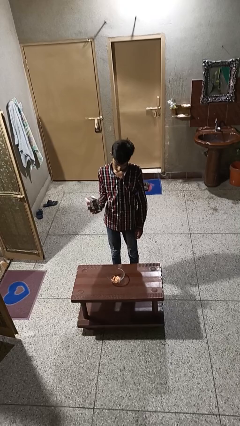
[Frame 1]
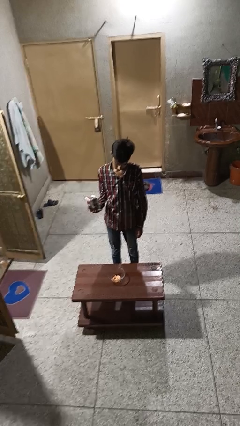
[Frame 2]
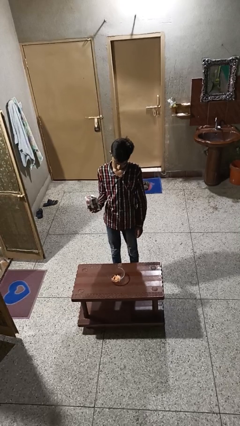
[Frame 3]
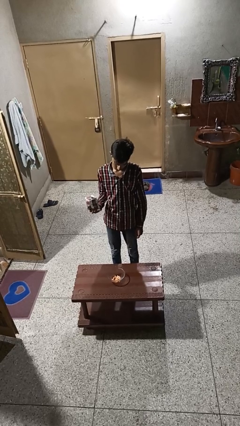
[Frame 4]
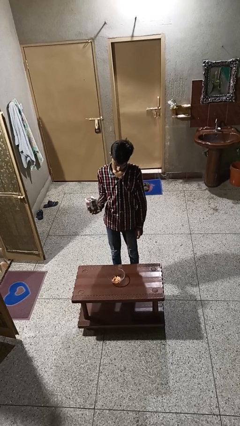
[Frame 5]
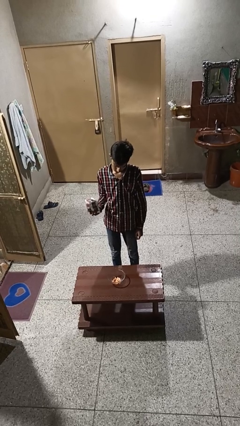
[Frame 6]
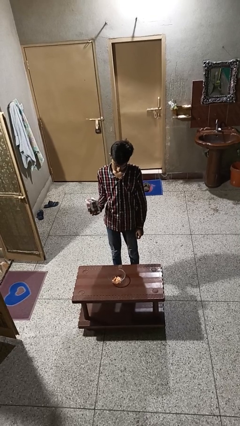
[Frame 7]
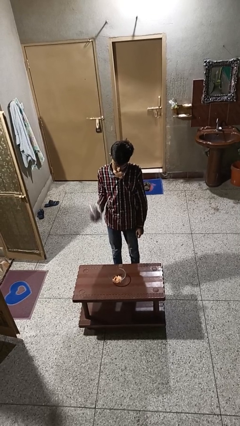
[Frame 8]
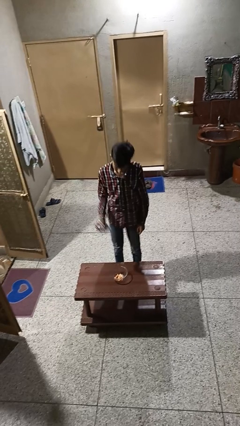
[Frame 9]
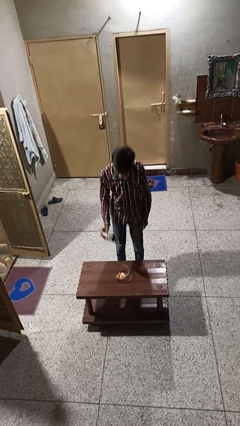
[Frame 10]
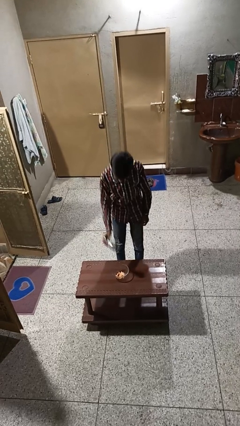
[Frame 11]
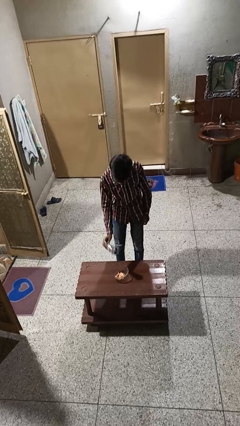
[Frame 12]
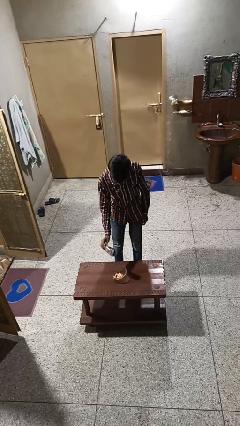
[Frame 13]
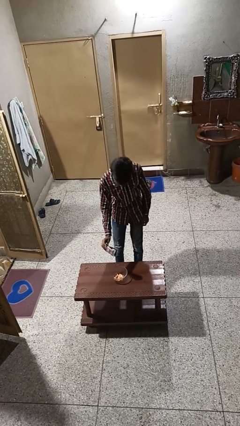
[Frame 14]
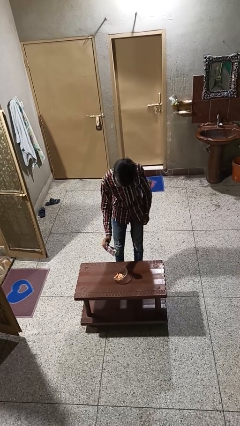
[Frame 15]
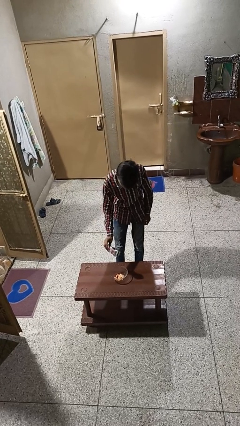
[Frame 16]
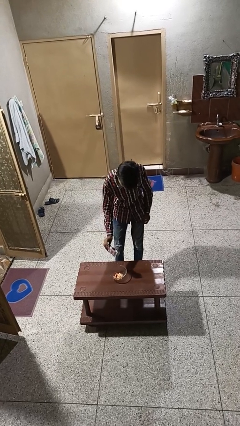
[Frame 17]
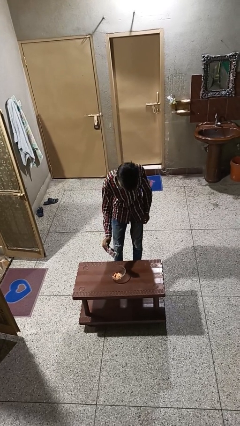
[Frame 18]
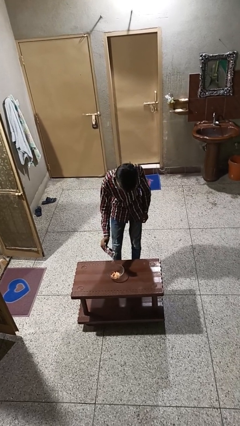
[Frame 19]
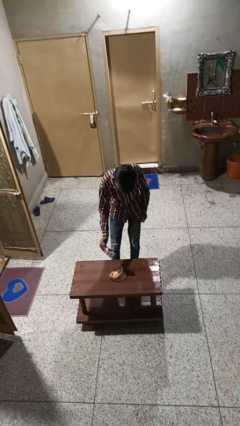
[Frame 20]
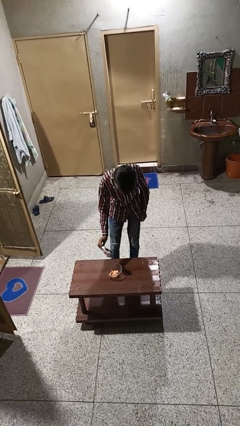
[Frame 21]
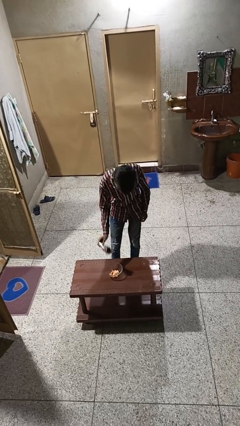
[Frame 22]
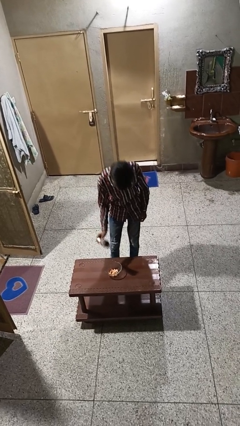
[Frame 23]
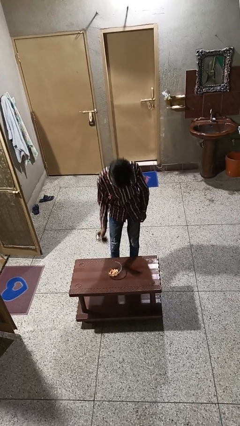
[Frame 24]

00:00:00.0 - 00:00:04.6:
person pours into bowl

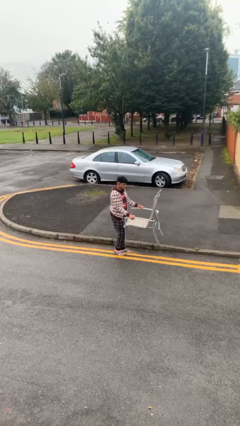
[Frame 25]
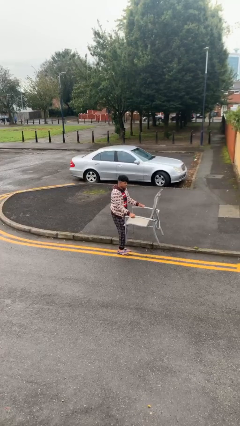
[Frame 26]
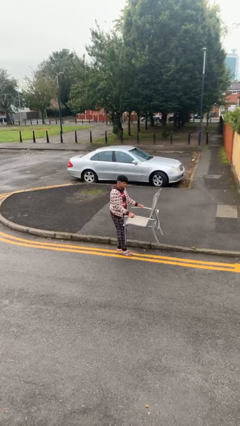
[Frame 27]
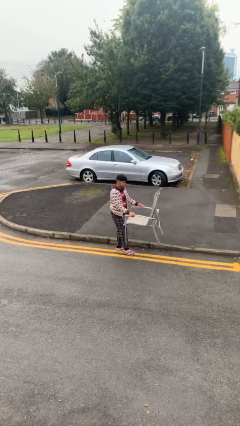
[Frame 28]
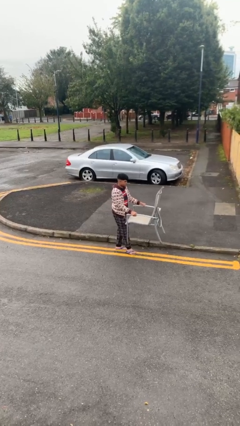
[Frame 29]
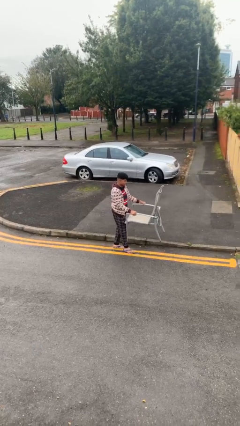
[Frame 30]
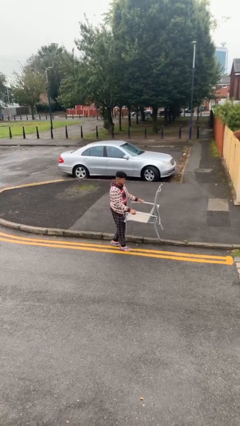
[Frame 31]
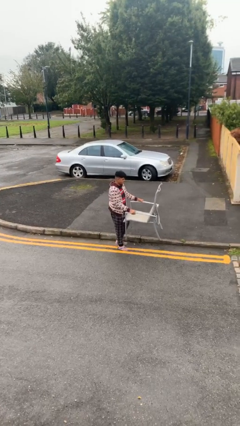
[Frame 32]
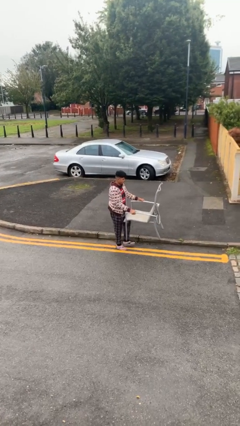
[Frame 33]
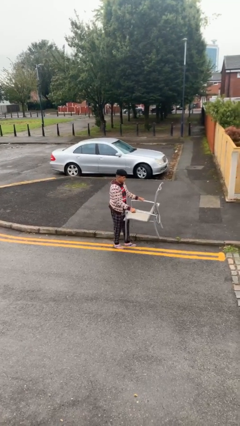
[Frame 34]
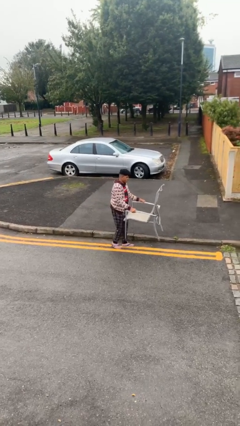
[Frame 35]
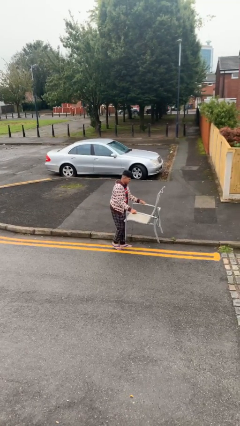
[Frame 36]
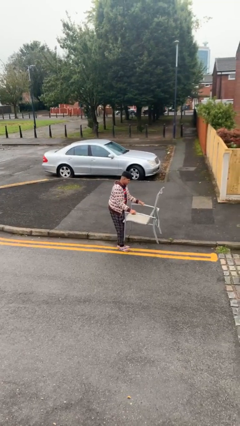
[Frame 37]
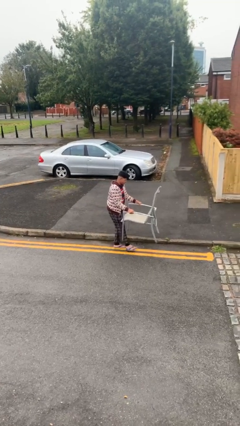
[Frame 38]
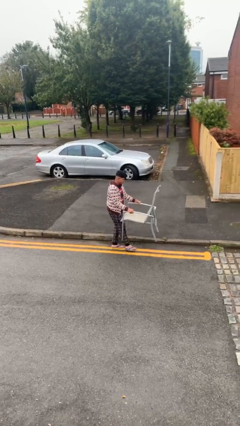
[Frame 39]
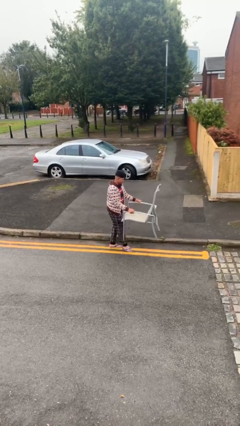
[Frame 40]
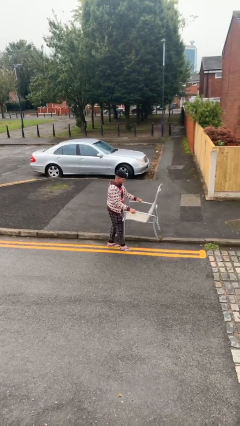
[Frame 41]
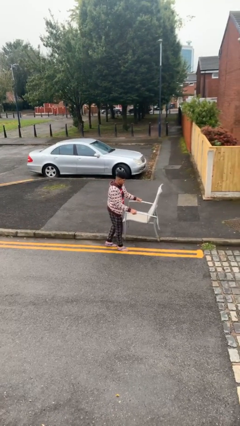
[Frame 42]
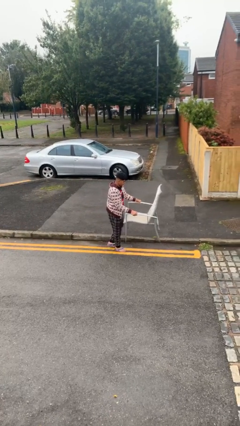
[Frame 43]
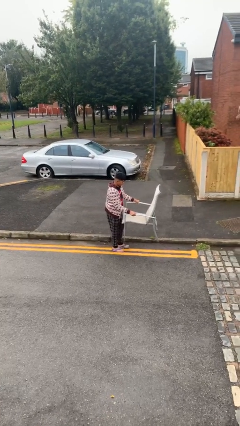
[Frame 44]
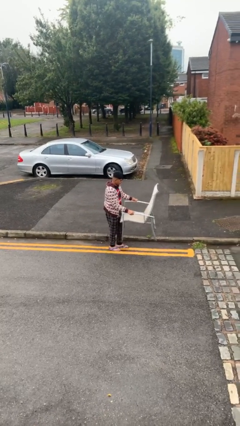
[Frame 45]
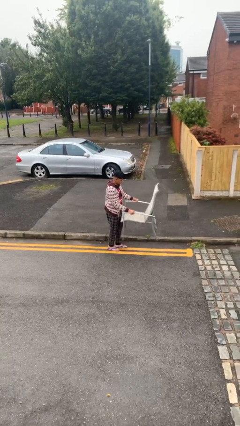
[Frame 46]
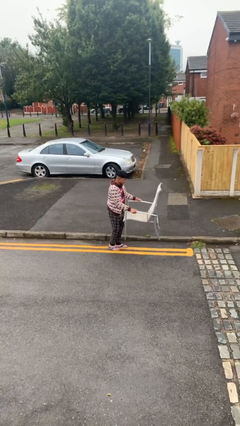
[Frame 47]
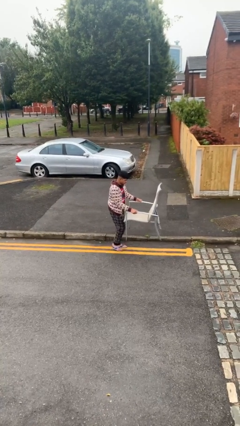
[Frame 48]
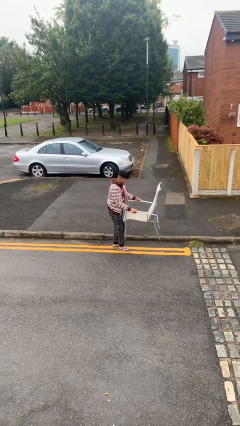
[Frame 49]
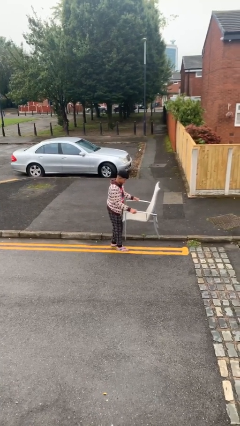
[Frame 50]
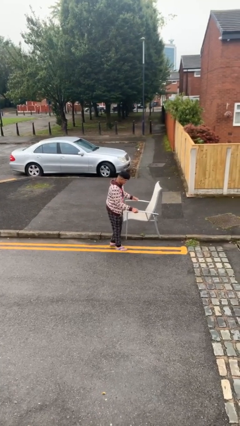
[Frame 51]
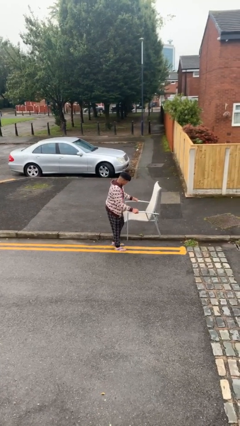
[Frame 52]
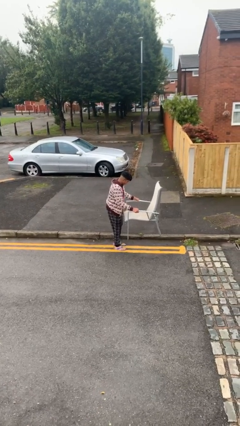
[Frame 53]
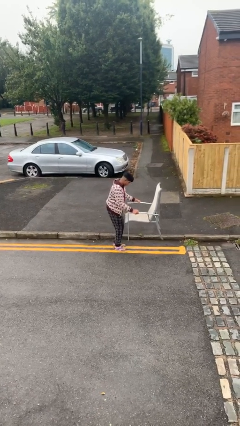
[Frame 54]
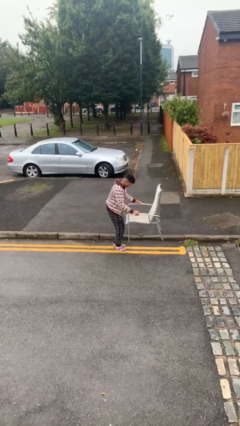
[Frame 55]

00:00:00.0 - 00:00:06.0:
person carries heavy object

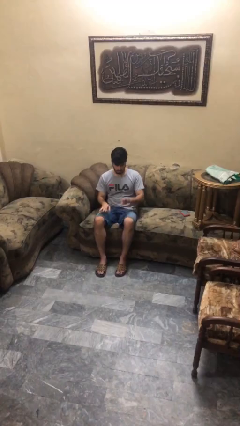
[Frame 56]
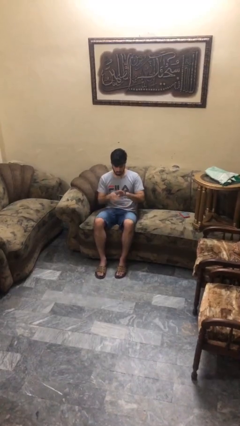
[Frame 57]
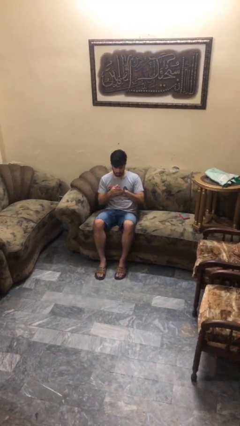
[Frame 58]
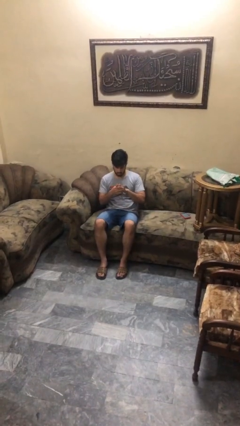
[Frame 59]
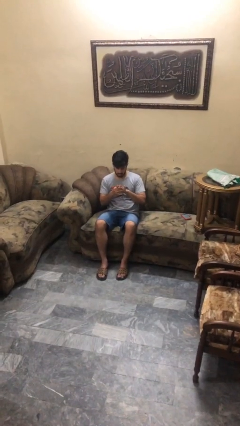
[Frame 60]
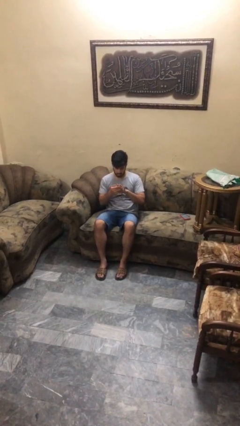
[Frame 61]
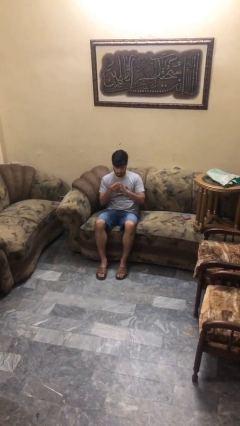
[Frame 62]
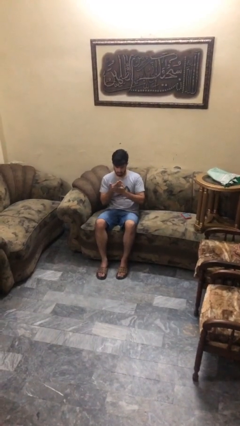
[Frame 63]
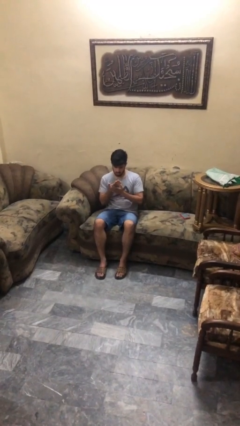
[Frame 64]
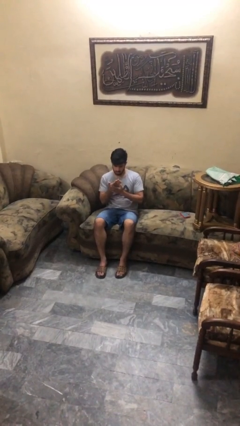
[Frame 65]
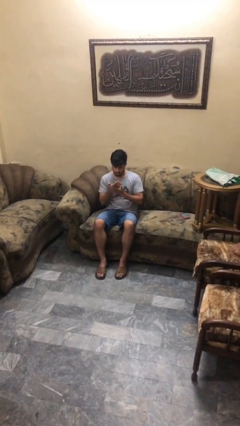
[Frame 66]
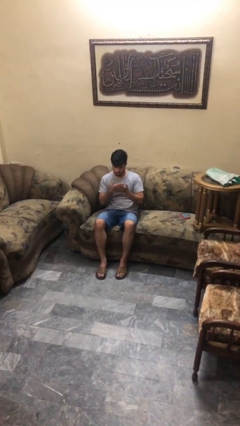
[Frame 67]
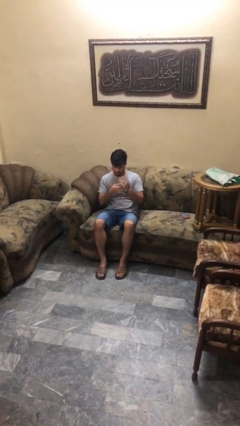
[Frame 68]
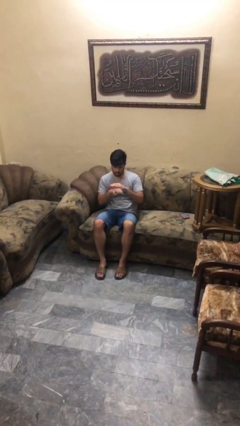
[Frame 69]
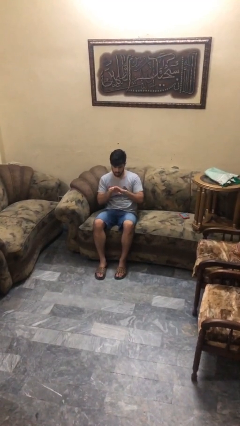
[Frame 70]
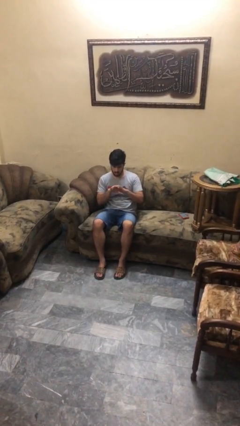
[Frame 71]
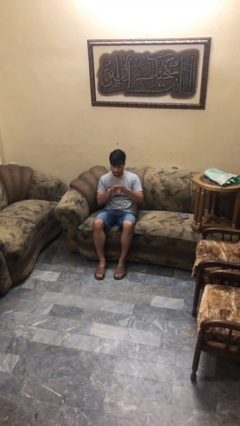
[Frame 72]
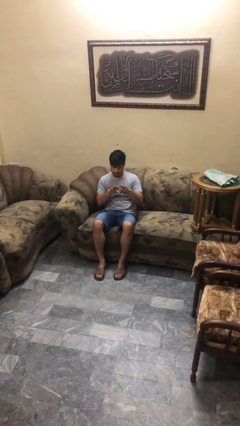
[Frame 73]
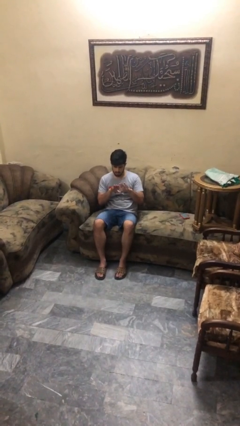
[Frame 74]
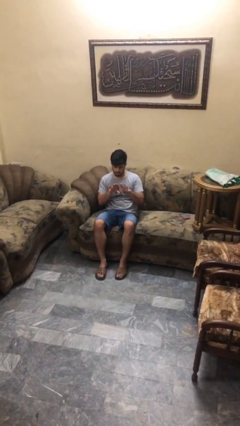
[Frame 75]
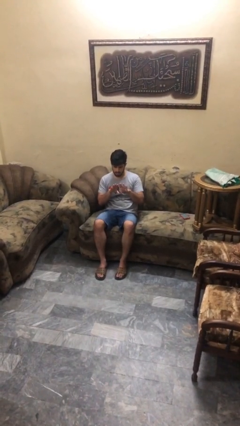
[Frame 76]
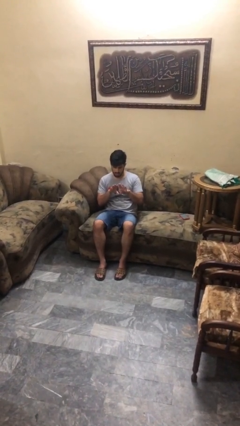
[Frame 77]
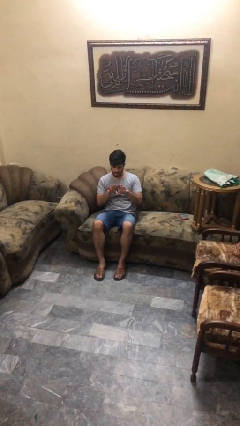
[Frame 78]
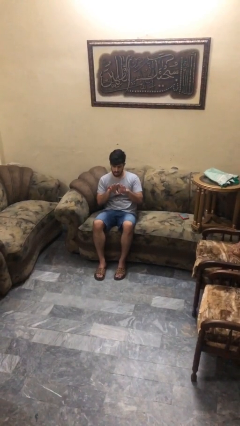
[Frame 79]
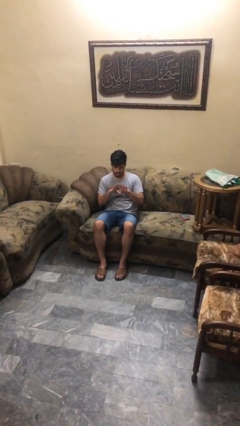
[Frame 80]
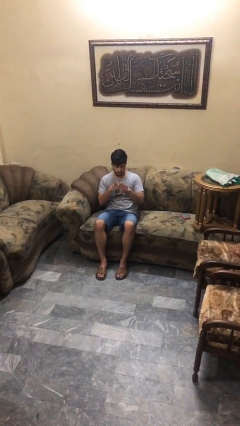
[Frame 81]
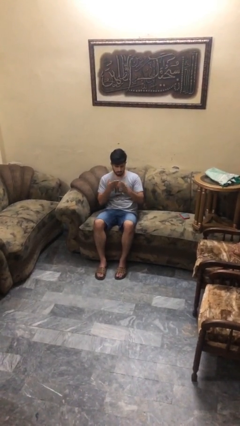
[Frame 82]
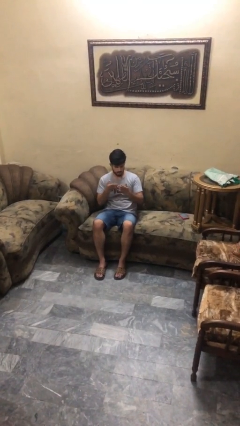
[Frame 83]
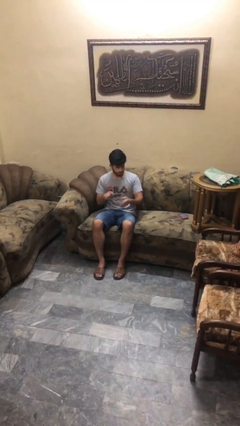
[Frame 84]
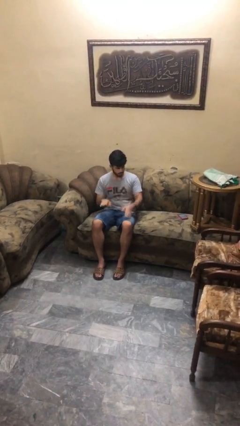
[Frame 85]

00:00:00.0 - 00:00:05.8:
person looks at hands in lap

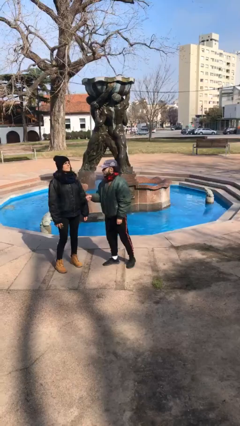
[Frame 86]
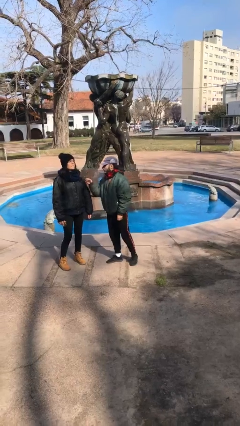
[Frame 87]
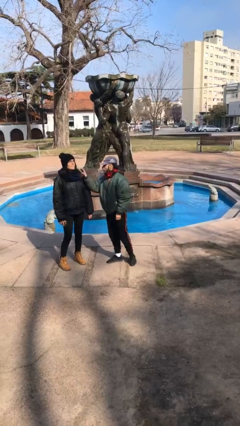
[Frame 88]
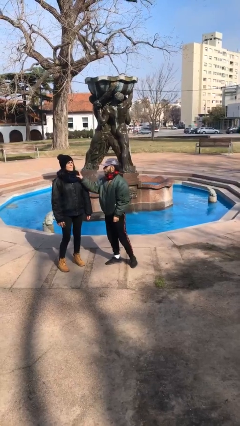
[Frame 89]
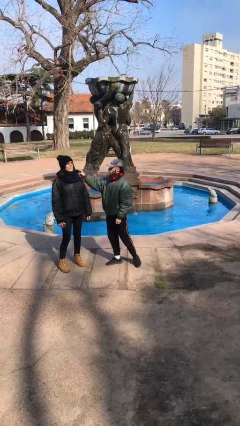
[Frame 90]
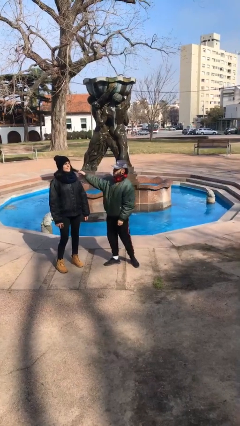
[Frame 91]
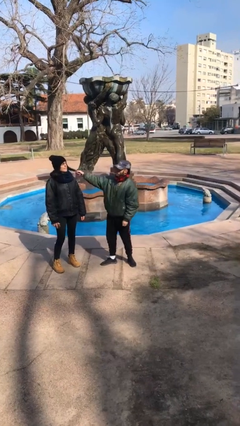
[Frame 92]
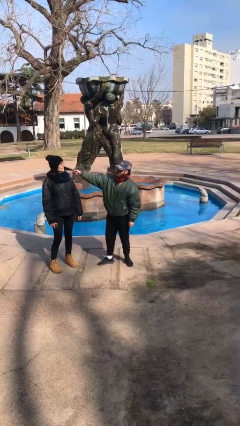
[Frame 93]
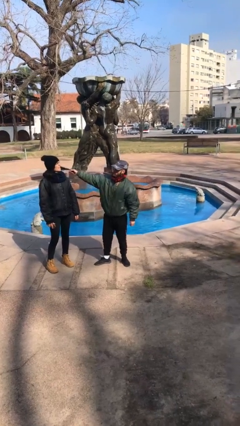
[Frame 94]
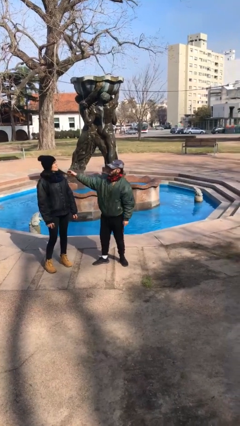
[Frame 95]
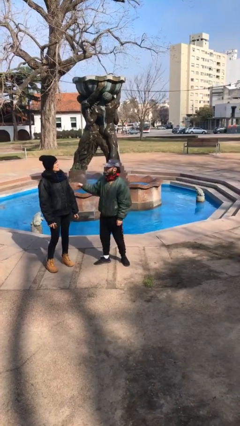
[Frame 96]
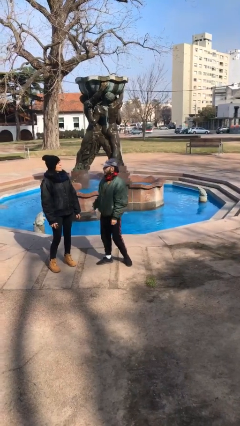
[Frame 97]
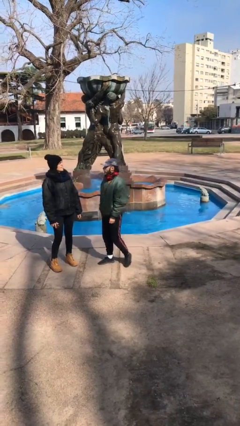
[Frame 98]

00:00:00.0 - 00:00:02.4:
person grabs person by hair
